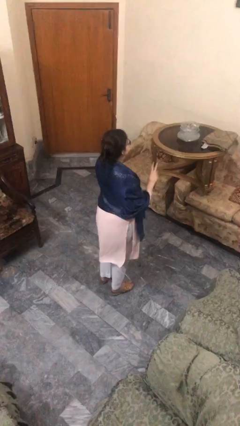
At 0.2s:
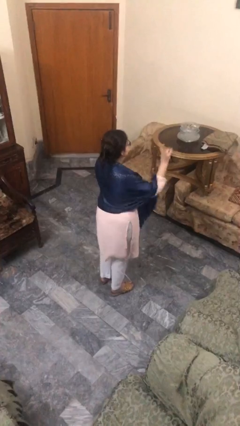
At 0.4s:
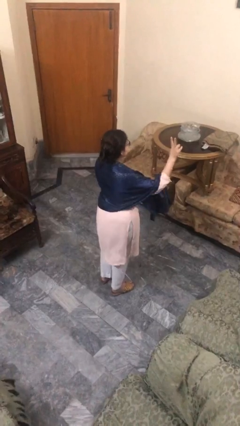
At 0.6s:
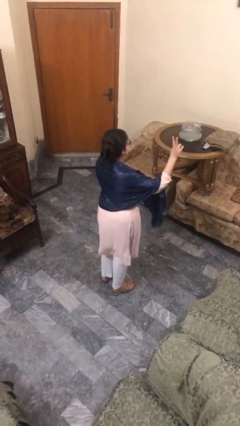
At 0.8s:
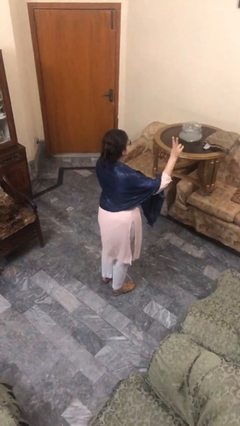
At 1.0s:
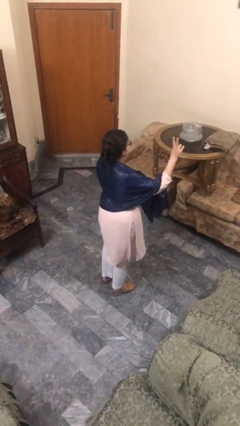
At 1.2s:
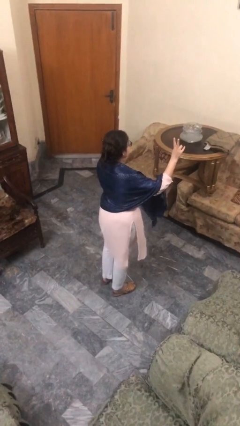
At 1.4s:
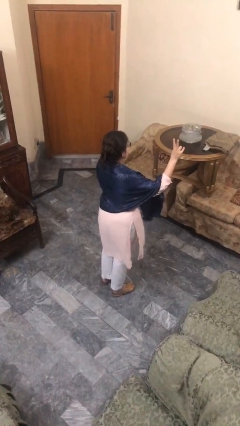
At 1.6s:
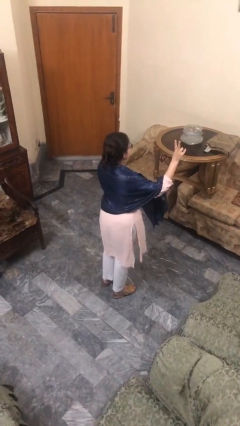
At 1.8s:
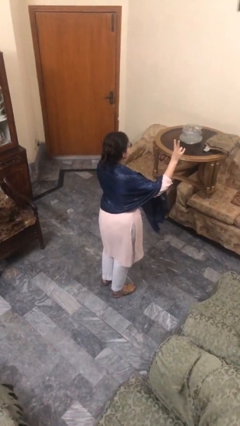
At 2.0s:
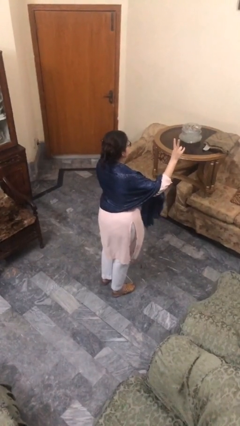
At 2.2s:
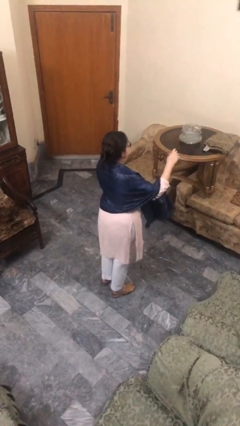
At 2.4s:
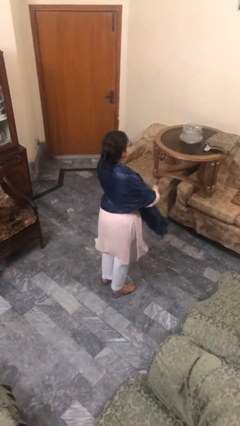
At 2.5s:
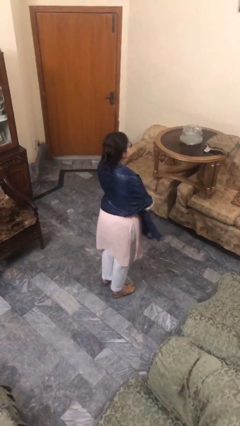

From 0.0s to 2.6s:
person gestures peace

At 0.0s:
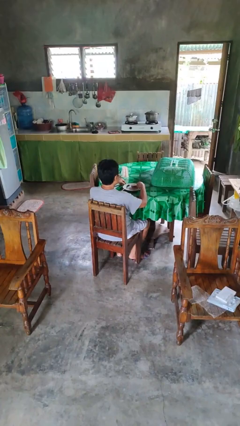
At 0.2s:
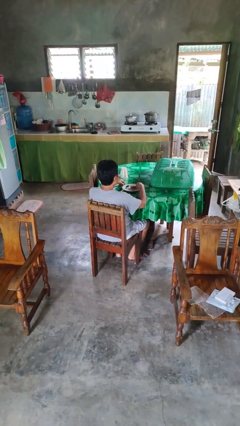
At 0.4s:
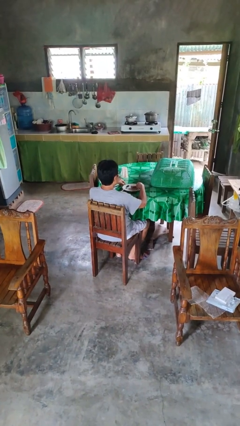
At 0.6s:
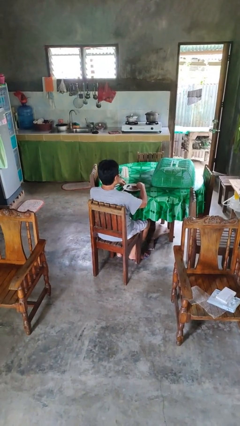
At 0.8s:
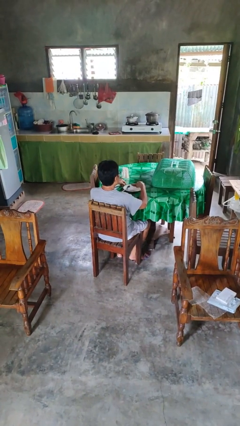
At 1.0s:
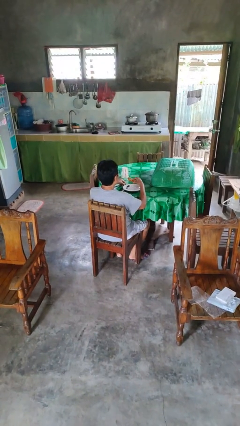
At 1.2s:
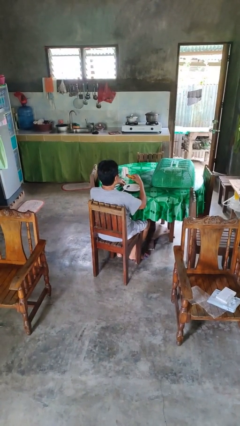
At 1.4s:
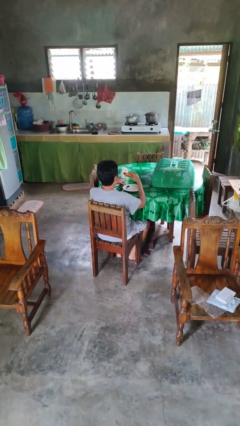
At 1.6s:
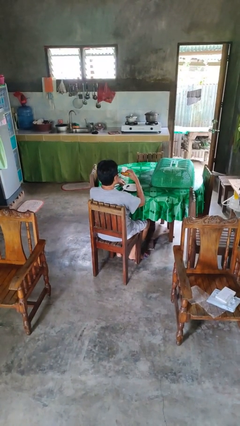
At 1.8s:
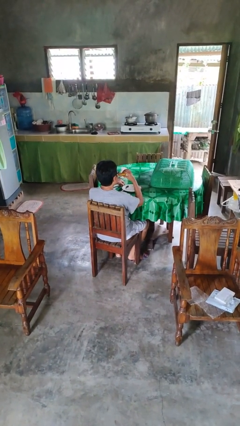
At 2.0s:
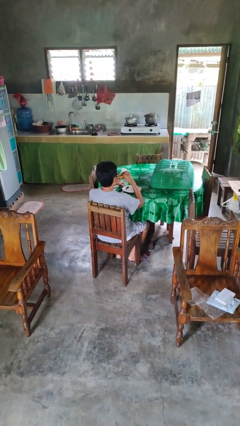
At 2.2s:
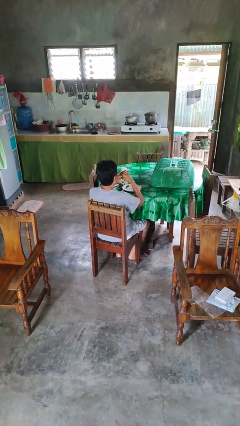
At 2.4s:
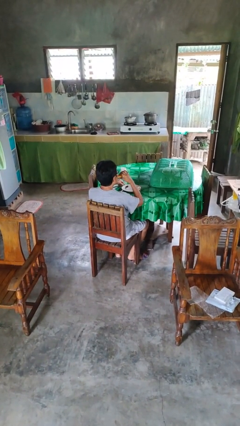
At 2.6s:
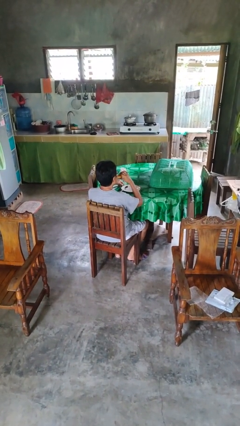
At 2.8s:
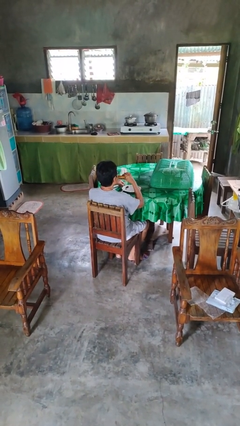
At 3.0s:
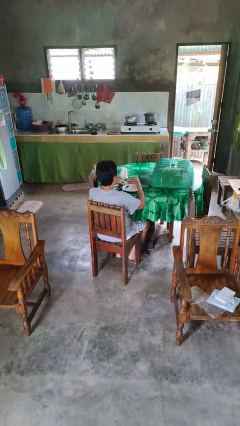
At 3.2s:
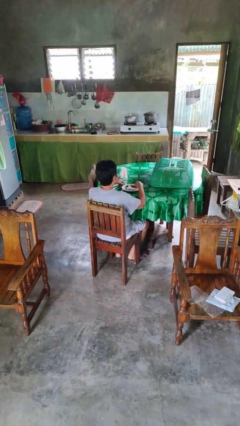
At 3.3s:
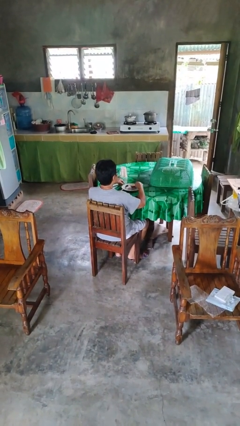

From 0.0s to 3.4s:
person eats with hands

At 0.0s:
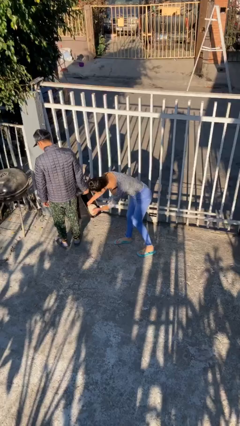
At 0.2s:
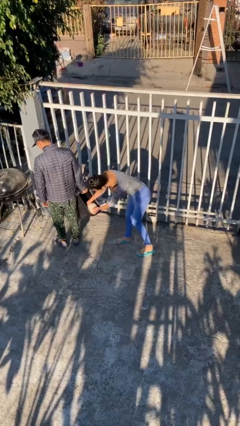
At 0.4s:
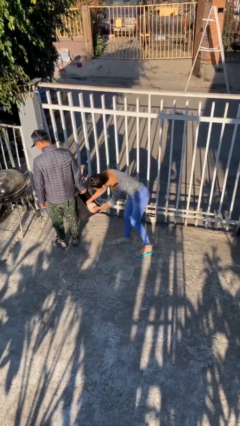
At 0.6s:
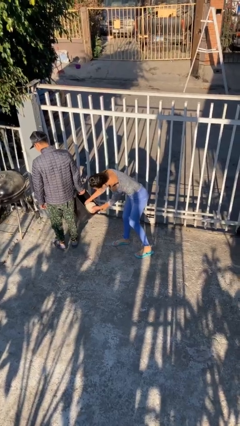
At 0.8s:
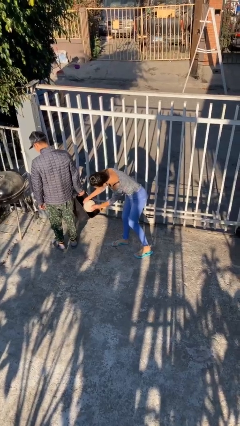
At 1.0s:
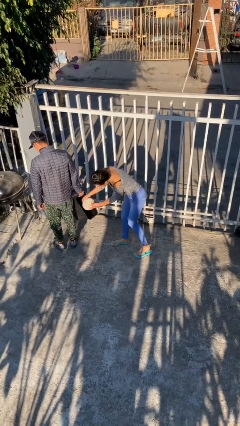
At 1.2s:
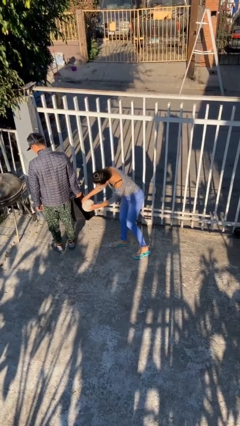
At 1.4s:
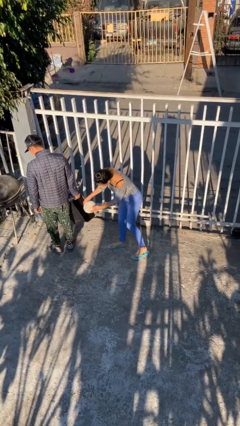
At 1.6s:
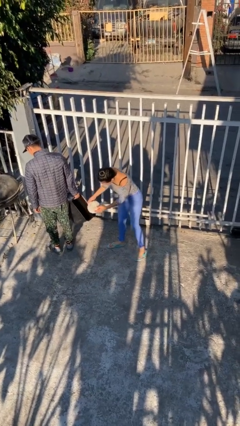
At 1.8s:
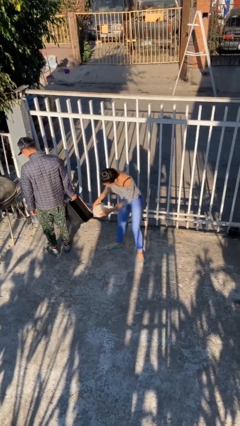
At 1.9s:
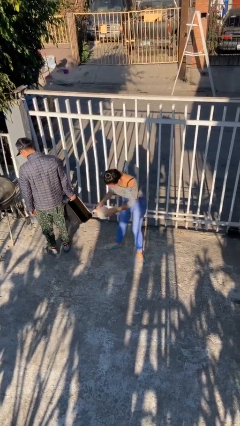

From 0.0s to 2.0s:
person steals object from person

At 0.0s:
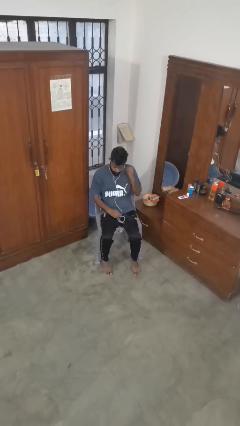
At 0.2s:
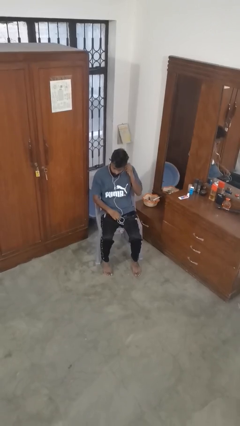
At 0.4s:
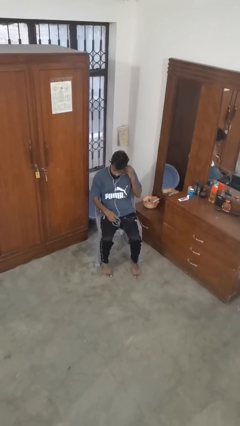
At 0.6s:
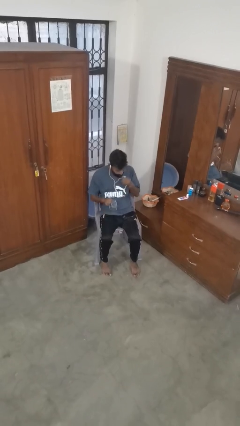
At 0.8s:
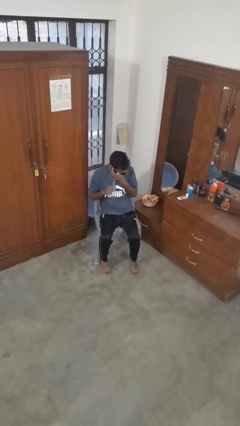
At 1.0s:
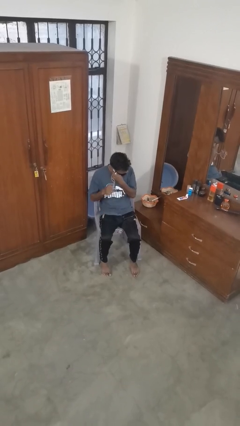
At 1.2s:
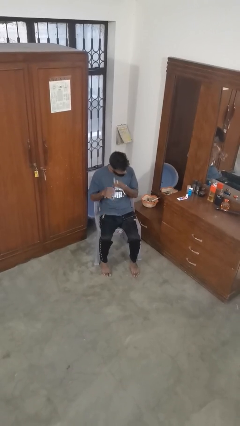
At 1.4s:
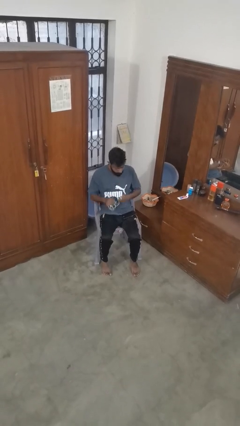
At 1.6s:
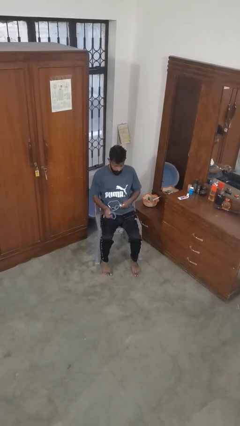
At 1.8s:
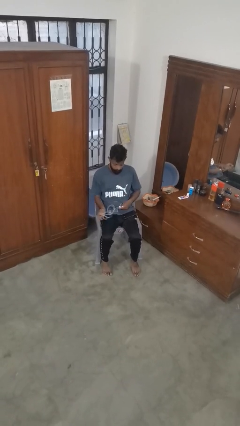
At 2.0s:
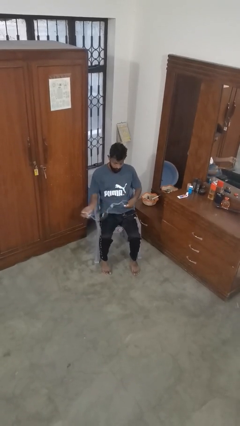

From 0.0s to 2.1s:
person takes off headphones

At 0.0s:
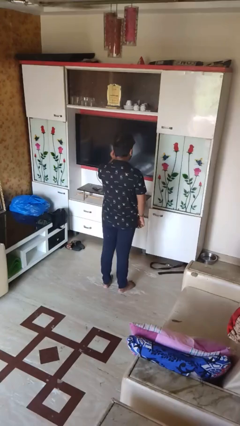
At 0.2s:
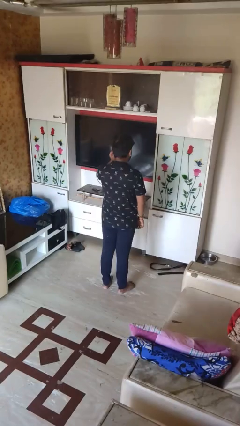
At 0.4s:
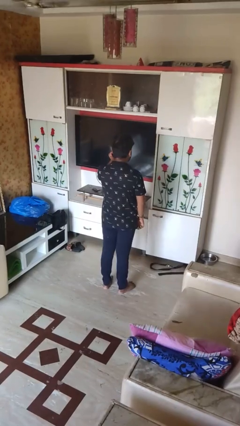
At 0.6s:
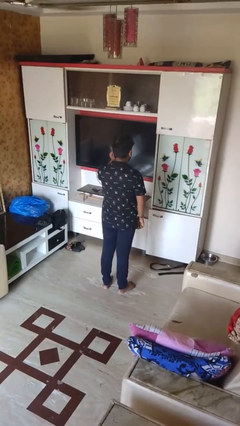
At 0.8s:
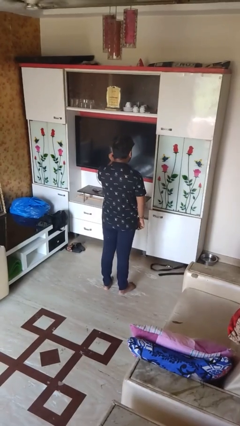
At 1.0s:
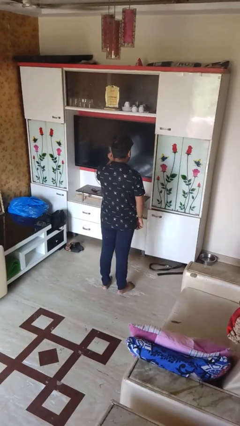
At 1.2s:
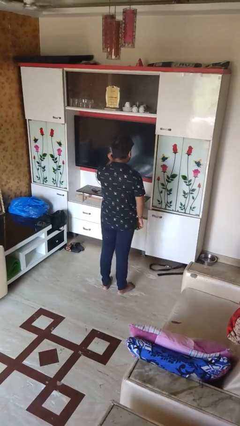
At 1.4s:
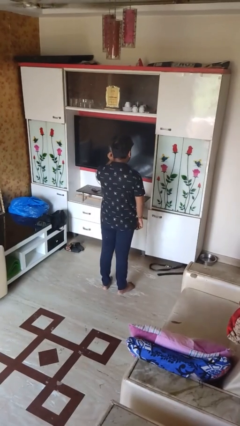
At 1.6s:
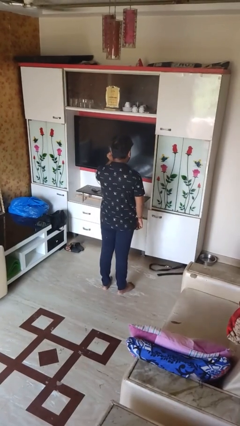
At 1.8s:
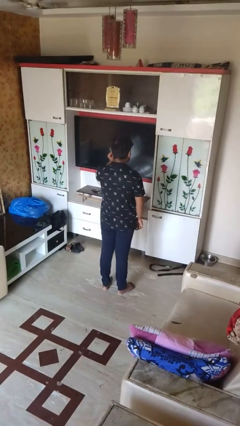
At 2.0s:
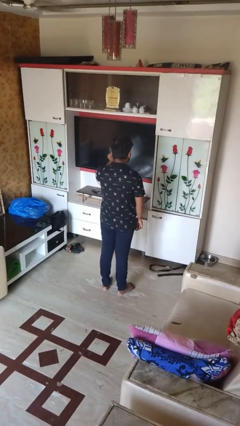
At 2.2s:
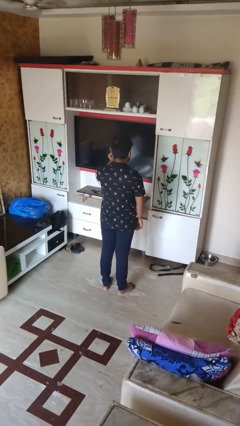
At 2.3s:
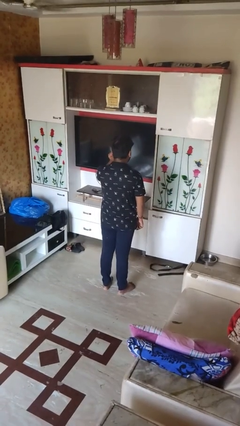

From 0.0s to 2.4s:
person touches earlobe

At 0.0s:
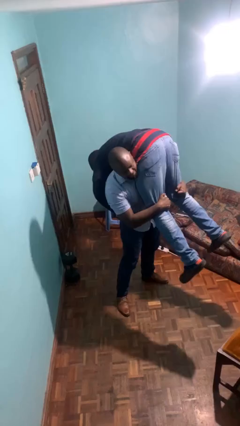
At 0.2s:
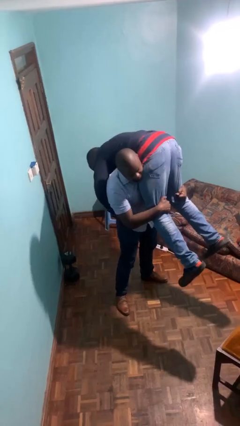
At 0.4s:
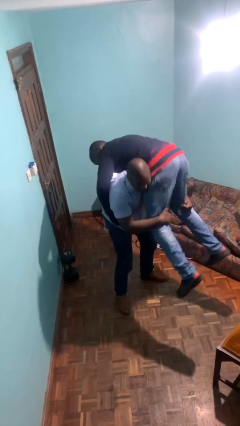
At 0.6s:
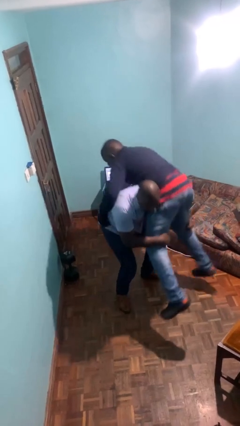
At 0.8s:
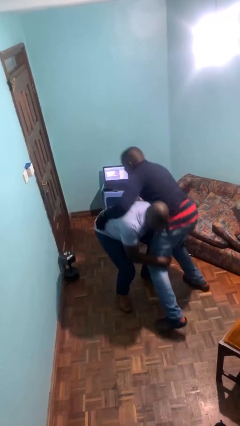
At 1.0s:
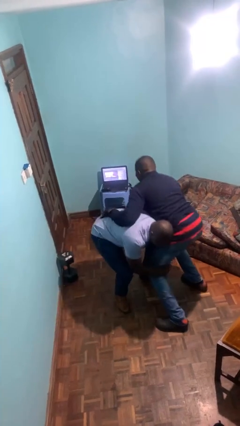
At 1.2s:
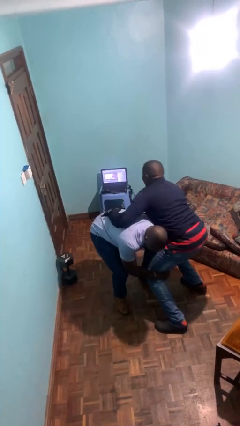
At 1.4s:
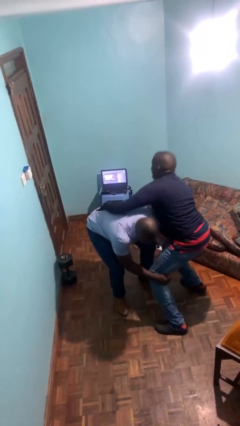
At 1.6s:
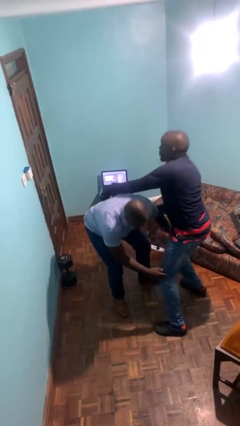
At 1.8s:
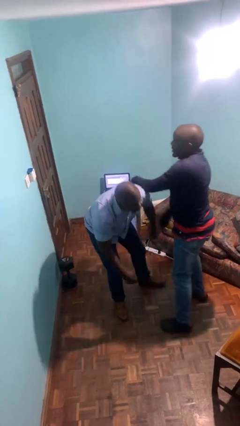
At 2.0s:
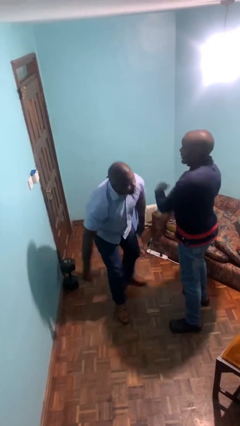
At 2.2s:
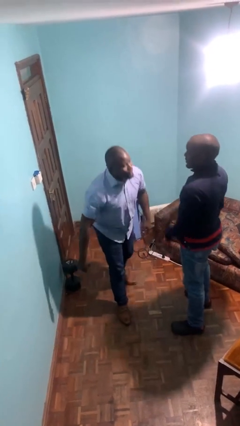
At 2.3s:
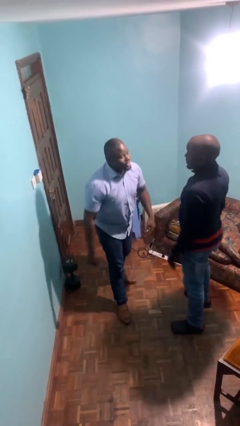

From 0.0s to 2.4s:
person puts down person

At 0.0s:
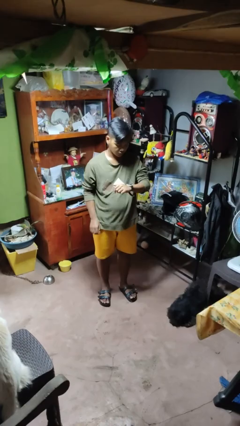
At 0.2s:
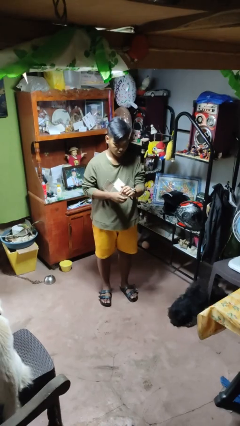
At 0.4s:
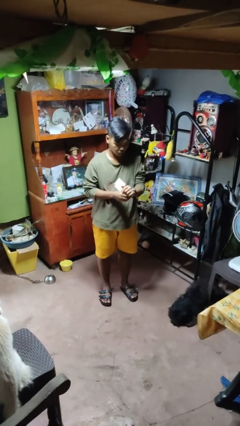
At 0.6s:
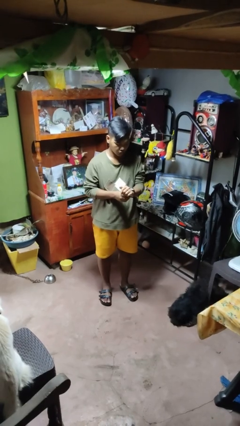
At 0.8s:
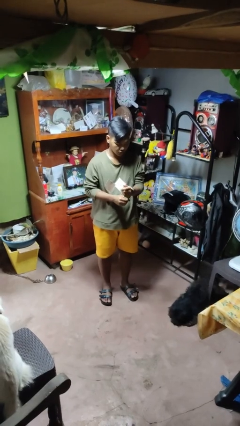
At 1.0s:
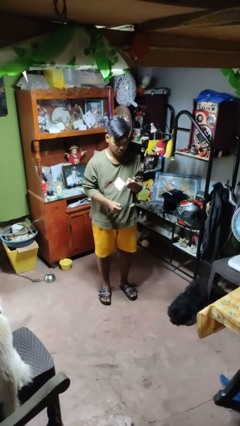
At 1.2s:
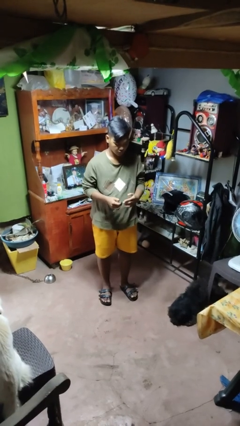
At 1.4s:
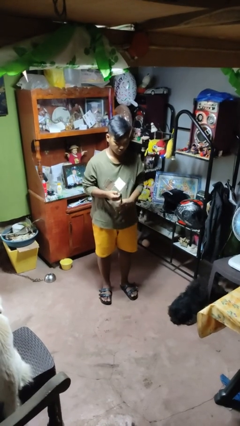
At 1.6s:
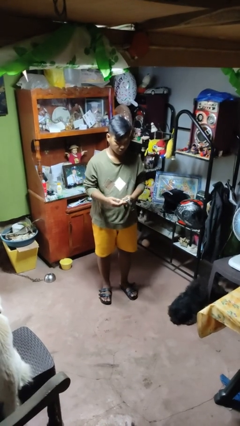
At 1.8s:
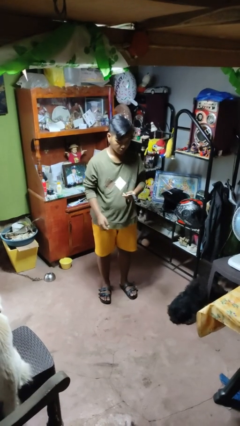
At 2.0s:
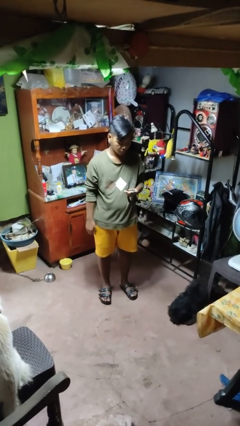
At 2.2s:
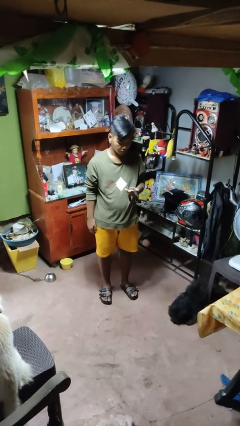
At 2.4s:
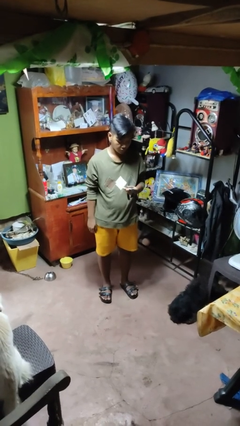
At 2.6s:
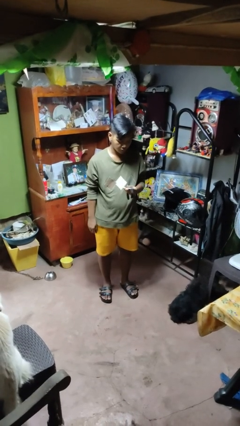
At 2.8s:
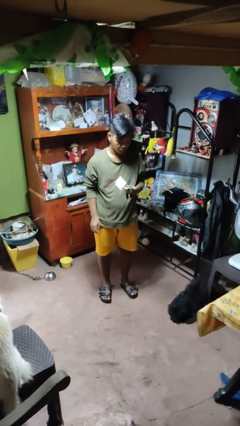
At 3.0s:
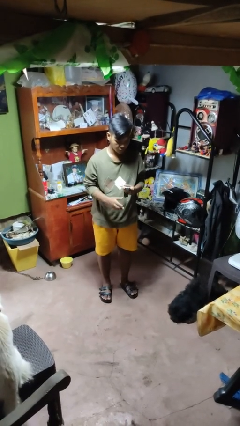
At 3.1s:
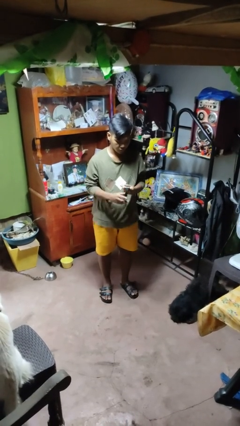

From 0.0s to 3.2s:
person takes off wristwatch
